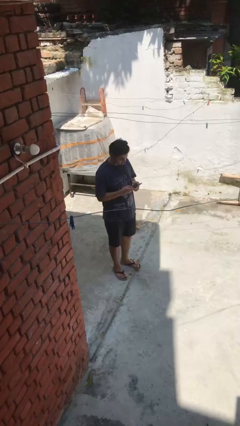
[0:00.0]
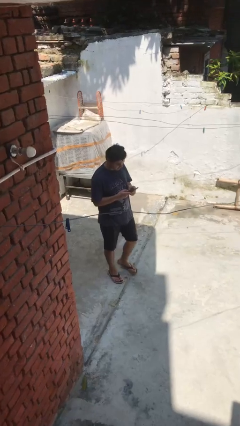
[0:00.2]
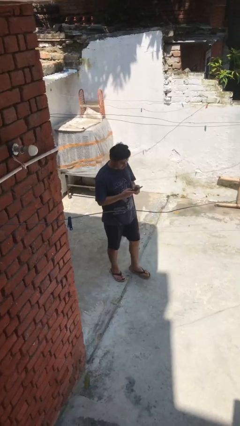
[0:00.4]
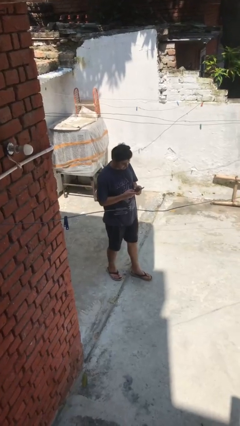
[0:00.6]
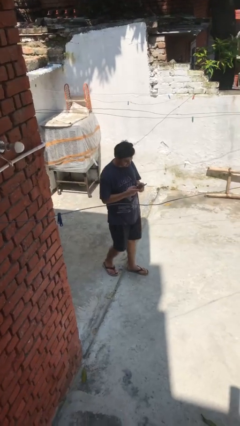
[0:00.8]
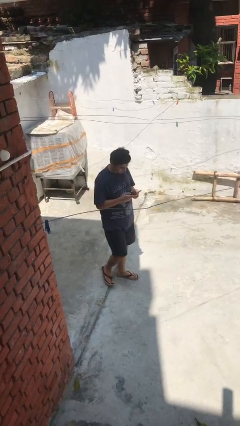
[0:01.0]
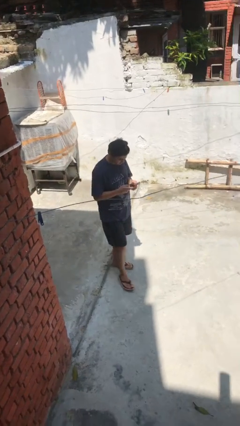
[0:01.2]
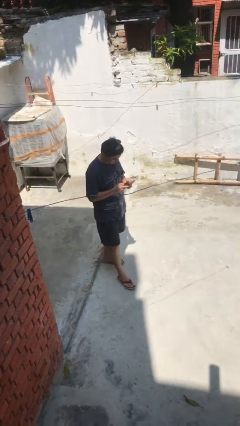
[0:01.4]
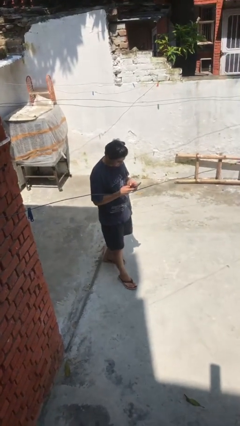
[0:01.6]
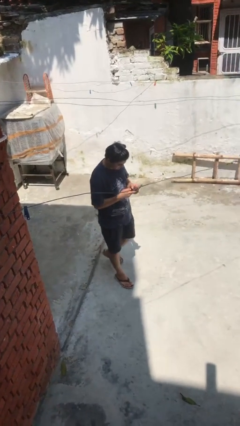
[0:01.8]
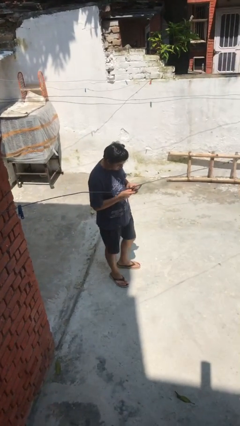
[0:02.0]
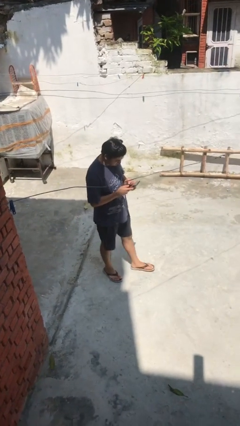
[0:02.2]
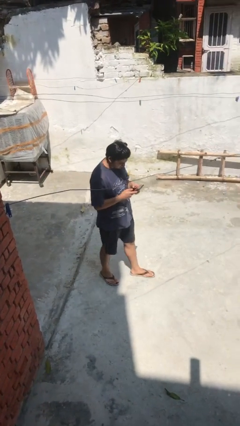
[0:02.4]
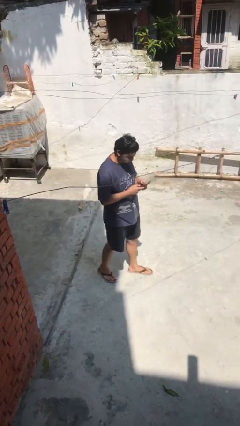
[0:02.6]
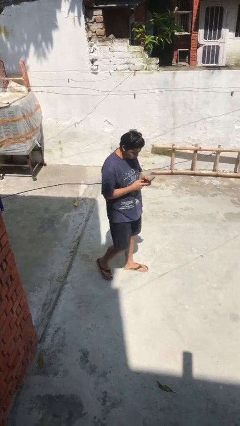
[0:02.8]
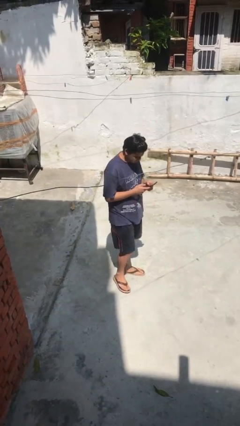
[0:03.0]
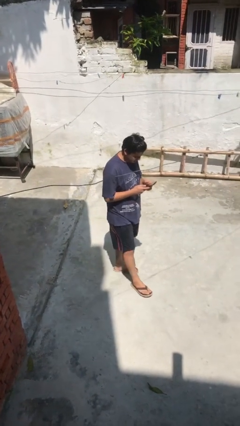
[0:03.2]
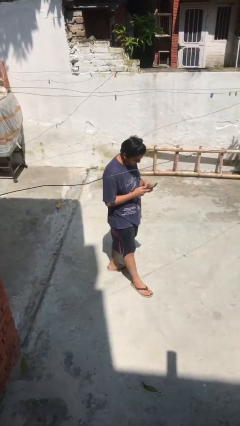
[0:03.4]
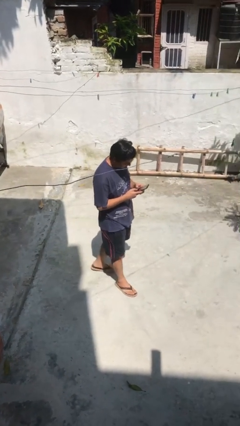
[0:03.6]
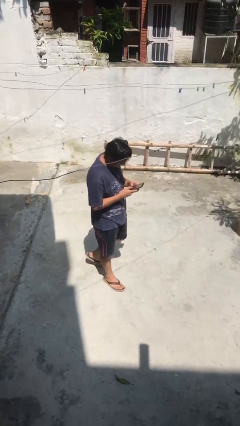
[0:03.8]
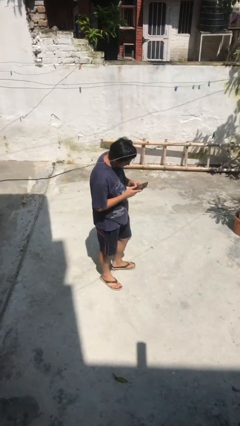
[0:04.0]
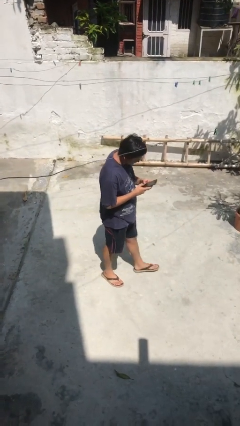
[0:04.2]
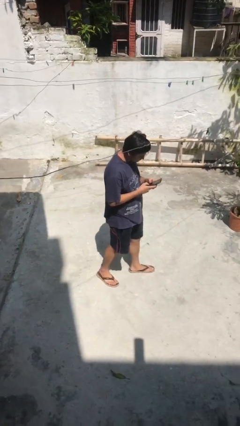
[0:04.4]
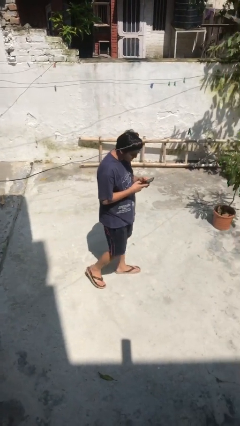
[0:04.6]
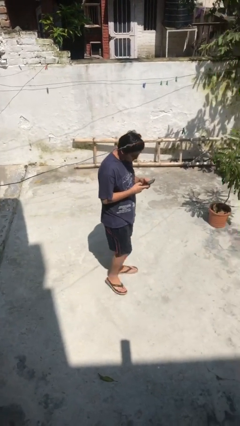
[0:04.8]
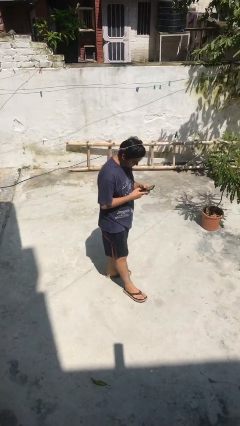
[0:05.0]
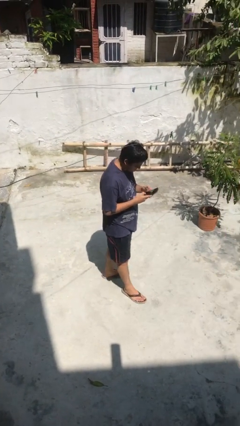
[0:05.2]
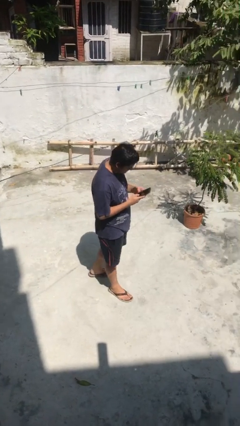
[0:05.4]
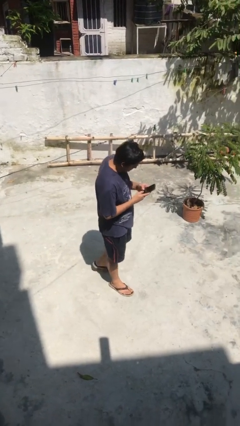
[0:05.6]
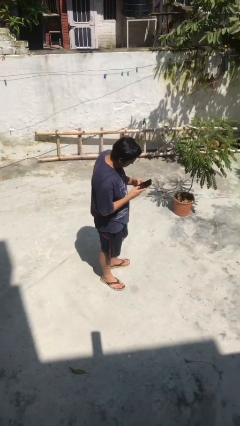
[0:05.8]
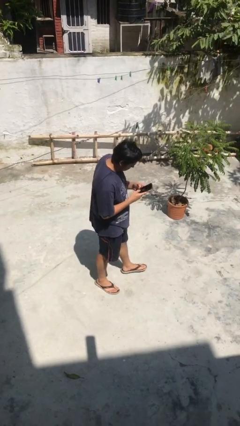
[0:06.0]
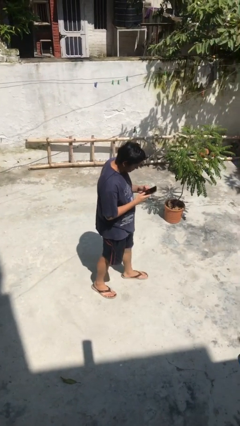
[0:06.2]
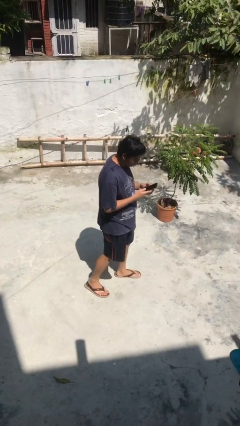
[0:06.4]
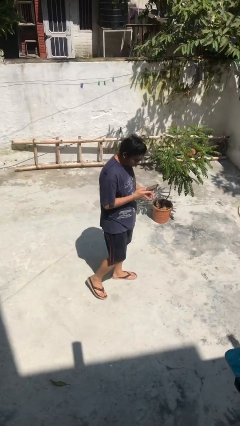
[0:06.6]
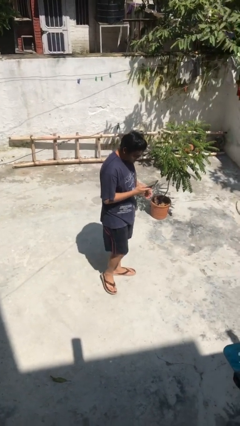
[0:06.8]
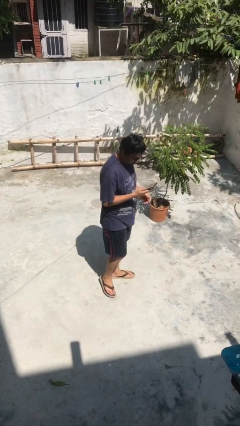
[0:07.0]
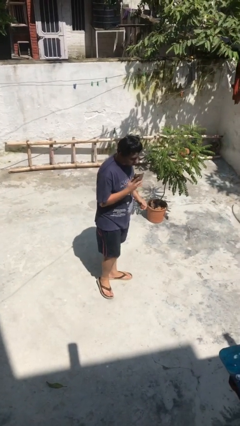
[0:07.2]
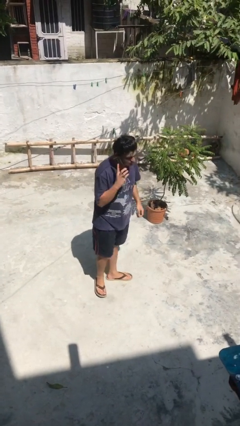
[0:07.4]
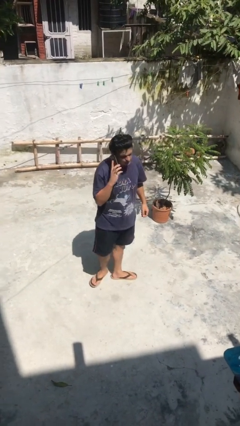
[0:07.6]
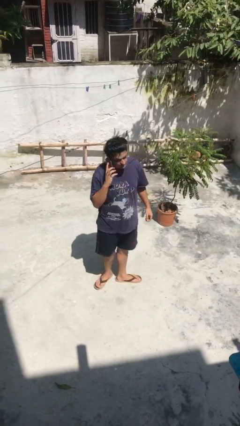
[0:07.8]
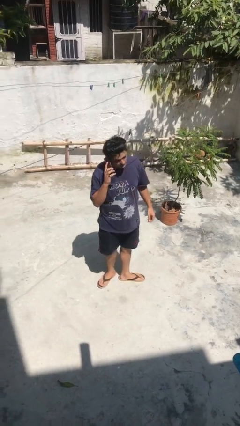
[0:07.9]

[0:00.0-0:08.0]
person texts on phone

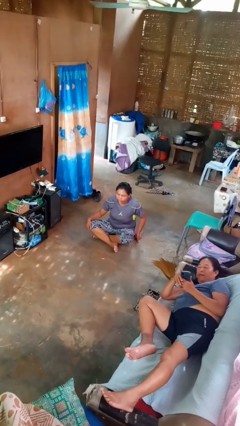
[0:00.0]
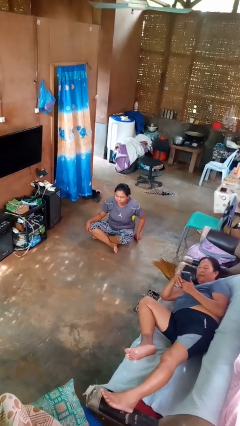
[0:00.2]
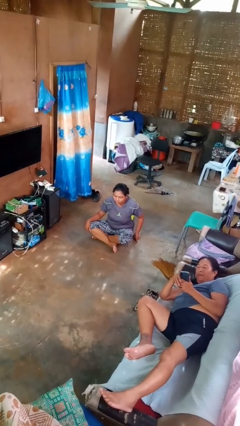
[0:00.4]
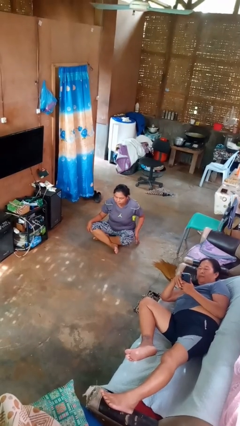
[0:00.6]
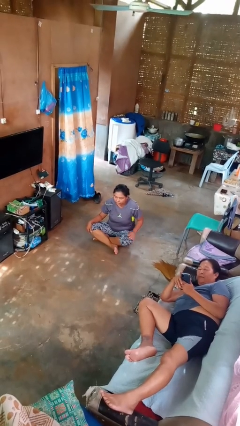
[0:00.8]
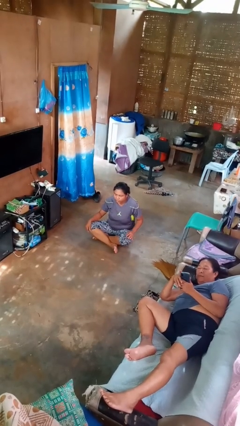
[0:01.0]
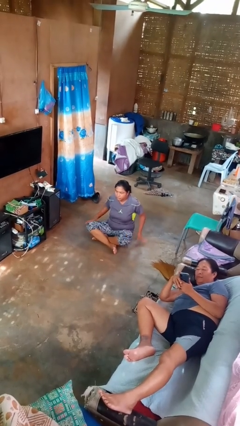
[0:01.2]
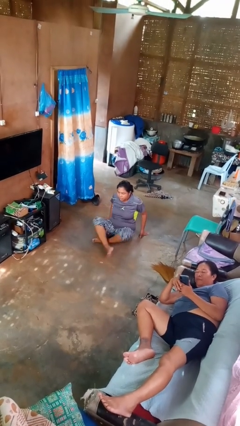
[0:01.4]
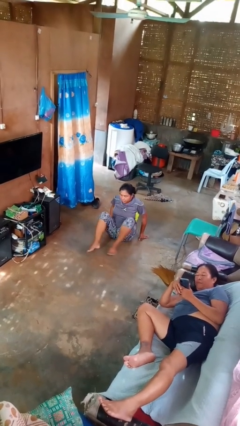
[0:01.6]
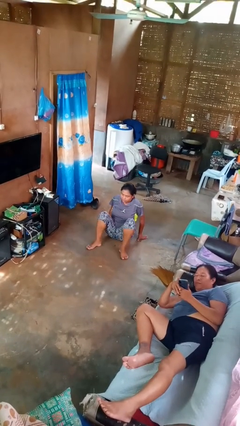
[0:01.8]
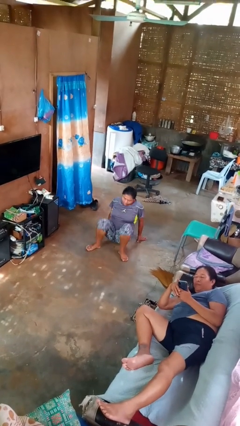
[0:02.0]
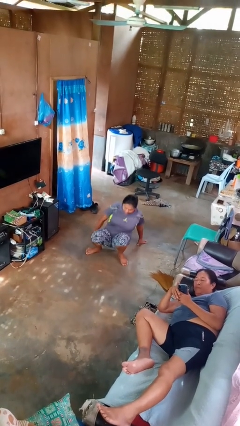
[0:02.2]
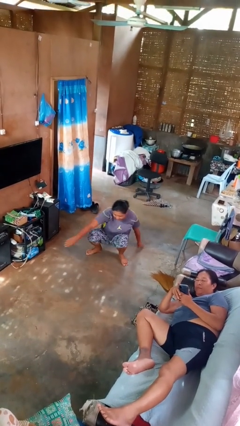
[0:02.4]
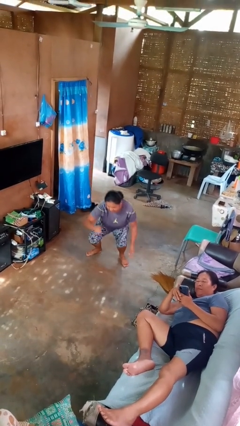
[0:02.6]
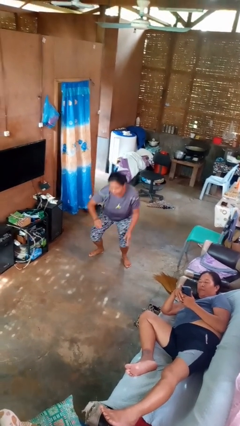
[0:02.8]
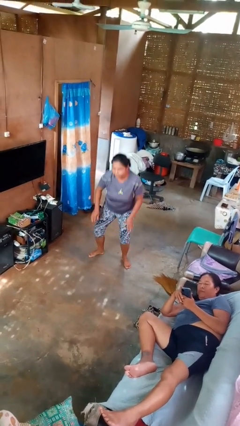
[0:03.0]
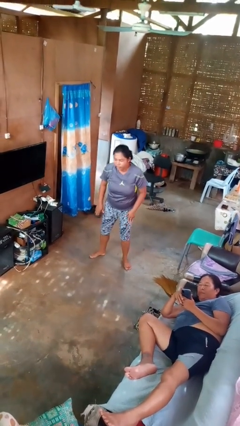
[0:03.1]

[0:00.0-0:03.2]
person stands up from floor

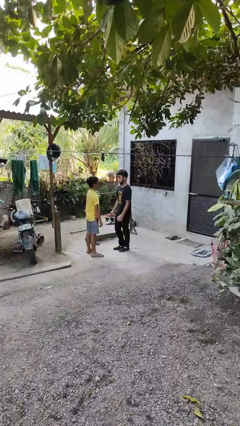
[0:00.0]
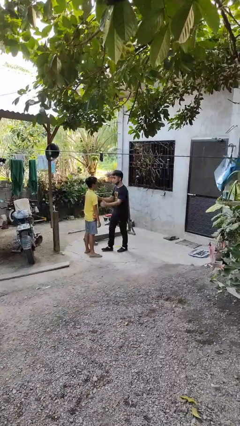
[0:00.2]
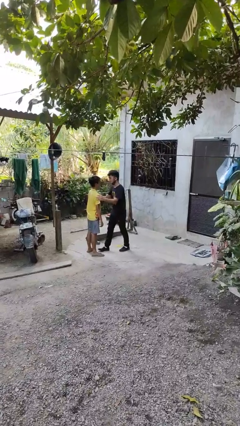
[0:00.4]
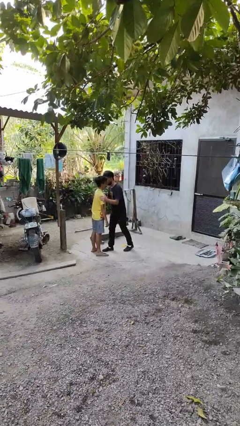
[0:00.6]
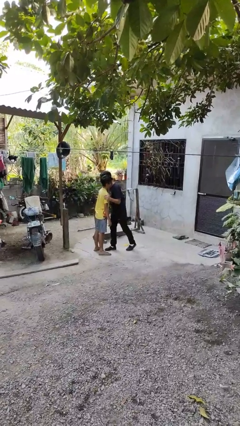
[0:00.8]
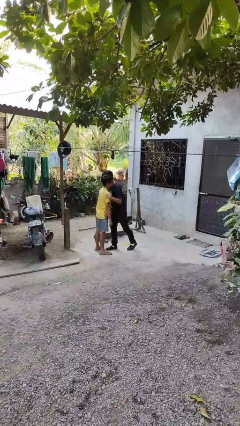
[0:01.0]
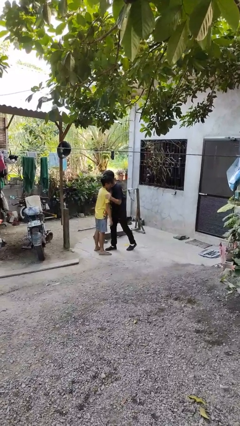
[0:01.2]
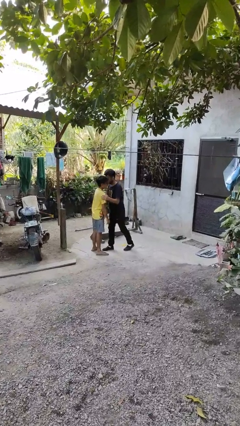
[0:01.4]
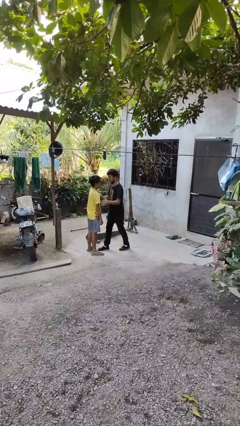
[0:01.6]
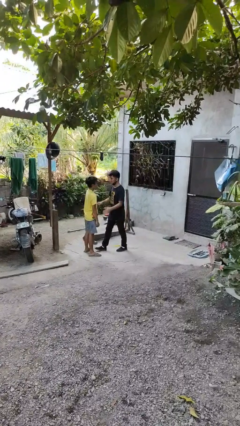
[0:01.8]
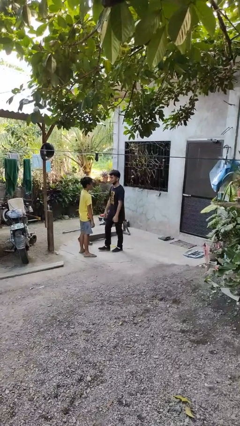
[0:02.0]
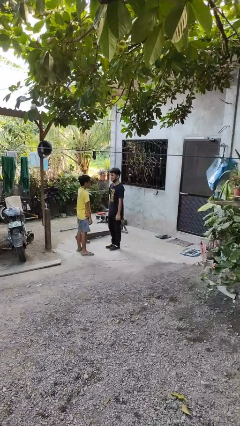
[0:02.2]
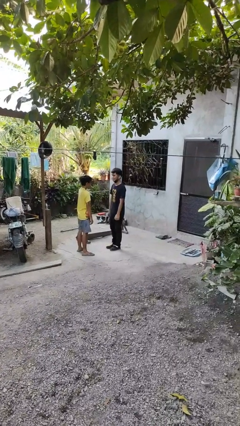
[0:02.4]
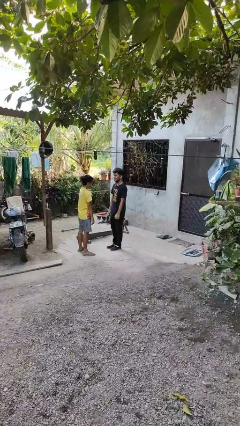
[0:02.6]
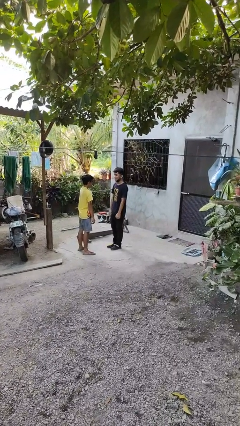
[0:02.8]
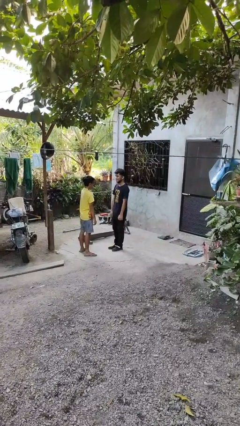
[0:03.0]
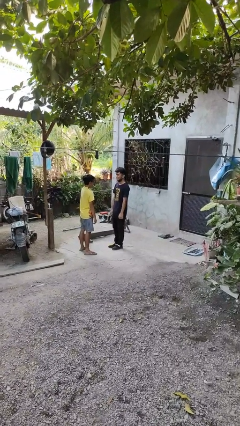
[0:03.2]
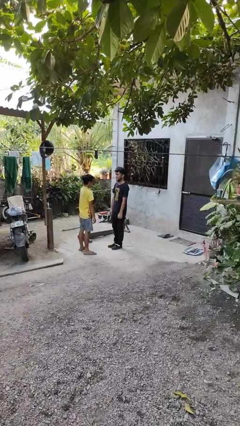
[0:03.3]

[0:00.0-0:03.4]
person kisses cheek of person

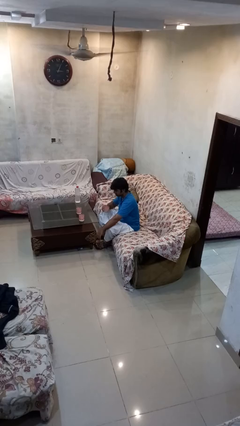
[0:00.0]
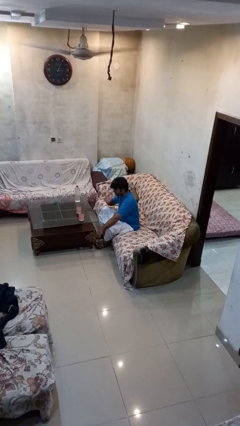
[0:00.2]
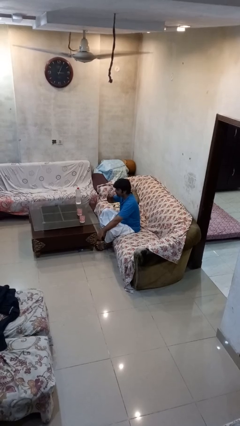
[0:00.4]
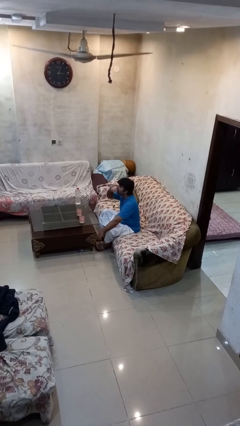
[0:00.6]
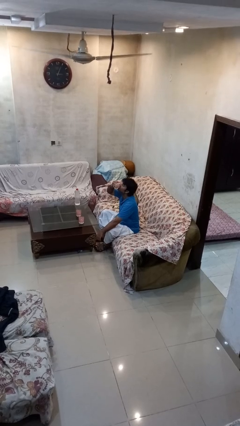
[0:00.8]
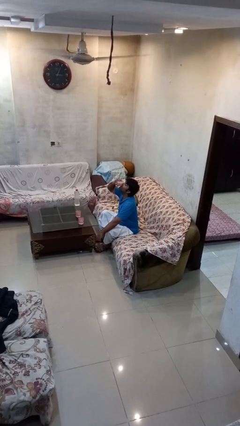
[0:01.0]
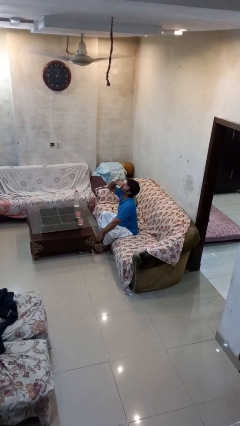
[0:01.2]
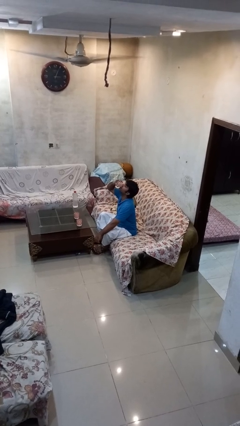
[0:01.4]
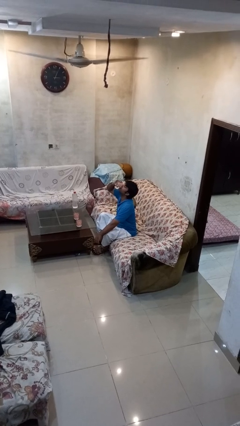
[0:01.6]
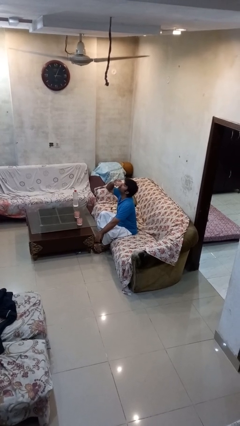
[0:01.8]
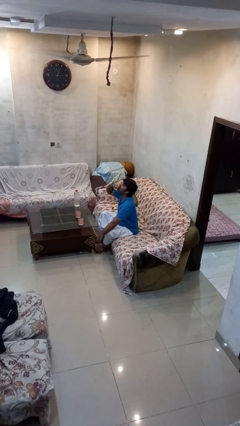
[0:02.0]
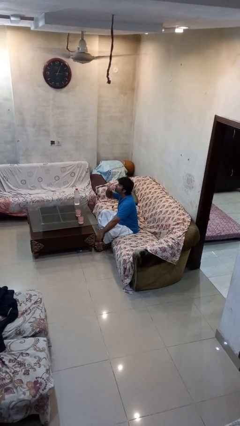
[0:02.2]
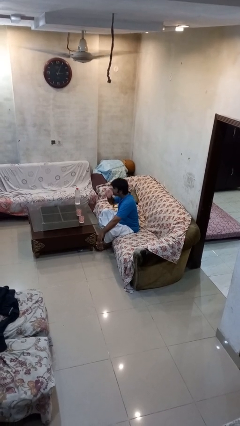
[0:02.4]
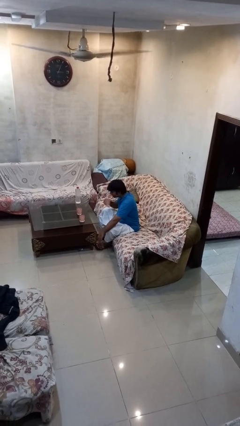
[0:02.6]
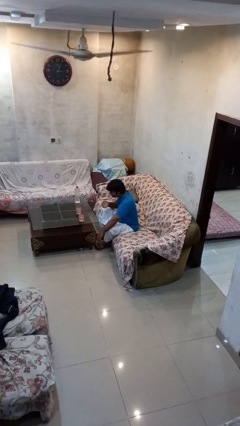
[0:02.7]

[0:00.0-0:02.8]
person drinks from shotglass

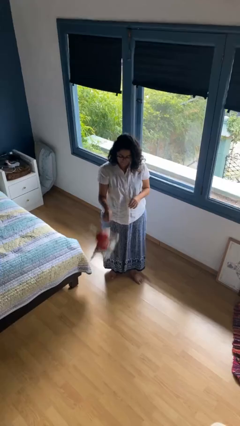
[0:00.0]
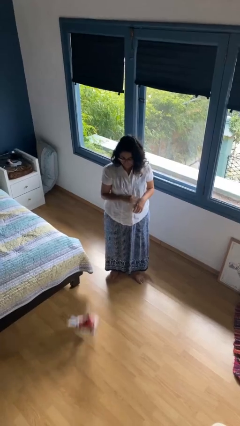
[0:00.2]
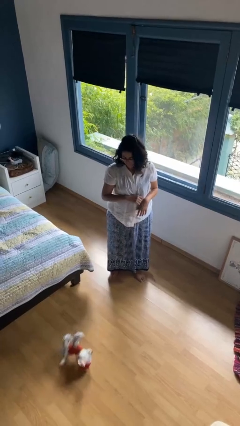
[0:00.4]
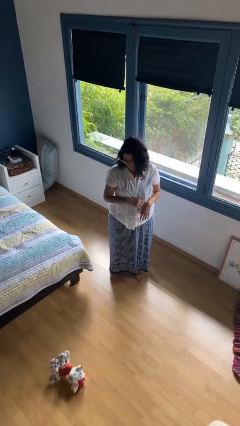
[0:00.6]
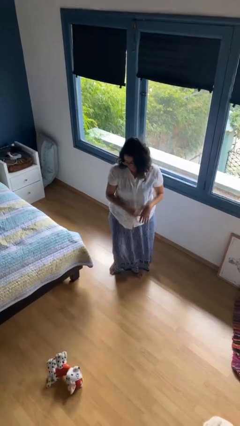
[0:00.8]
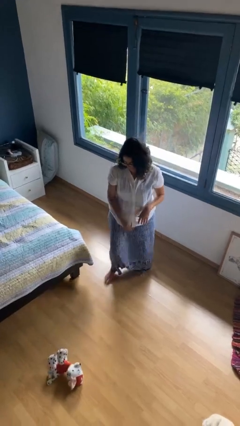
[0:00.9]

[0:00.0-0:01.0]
person throws object to ground
